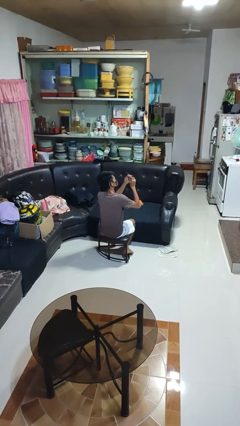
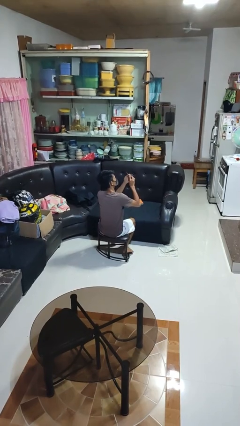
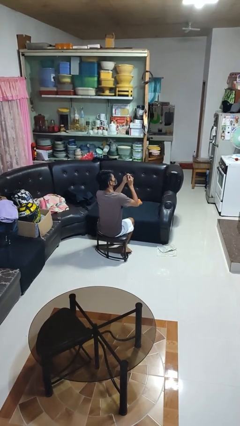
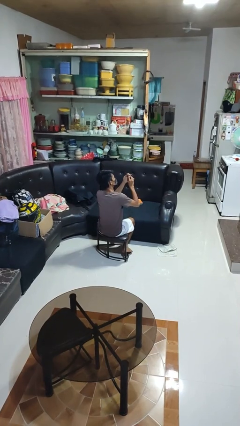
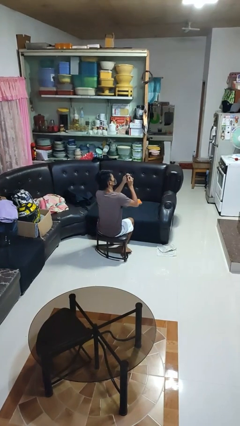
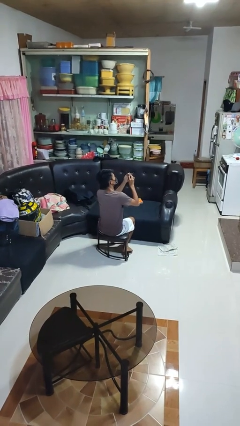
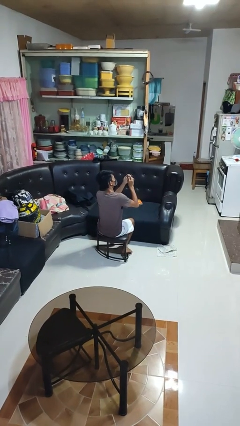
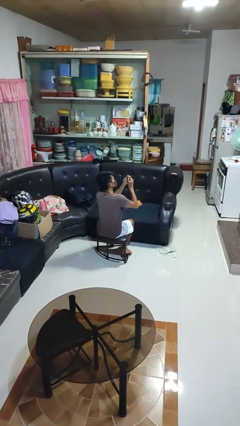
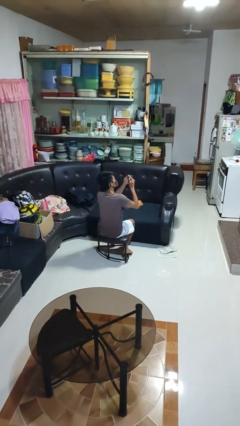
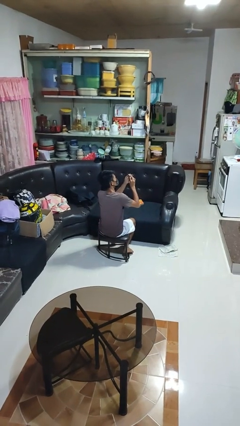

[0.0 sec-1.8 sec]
person files fingernails

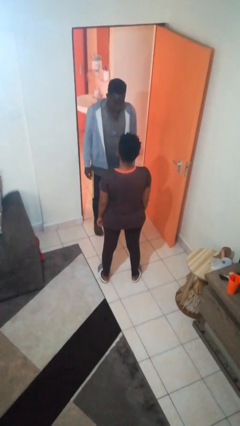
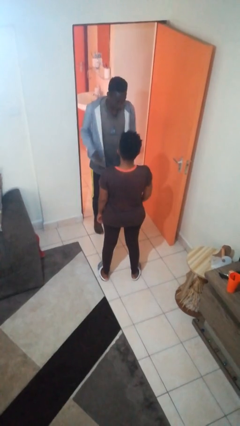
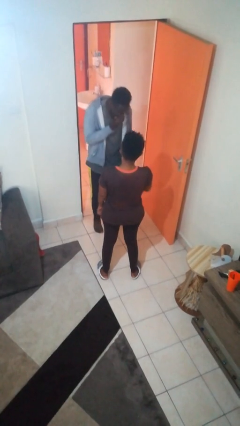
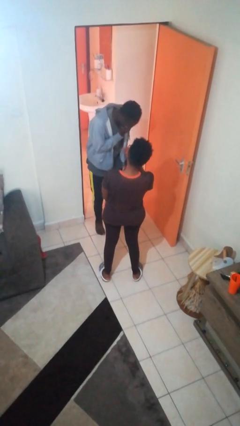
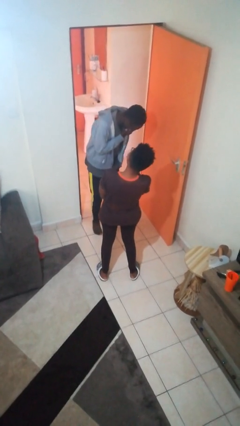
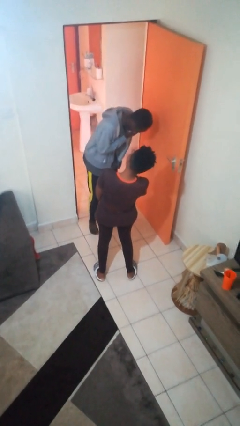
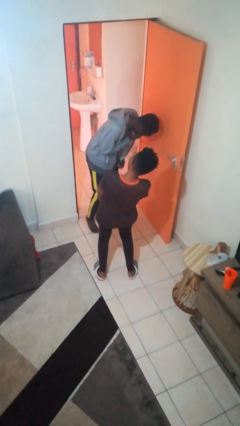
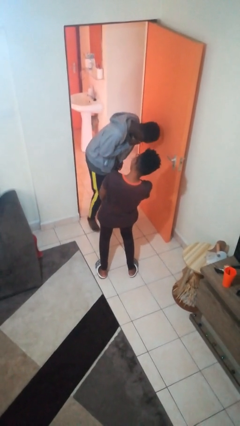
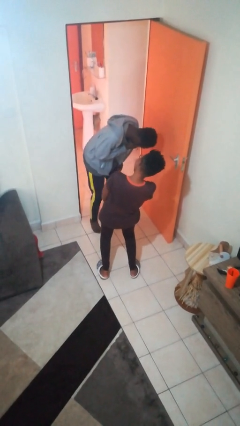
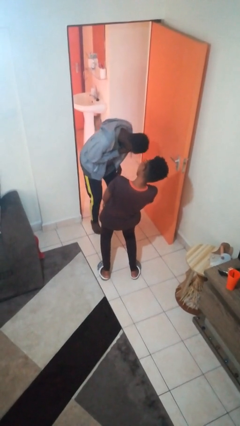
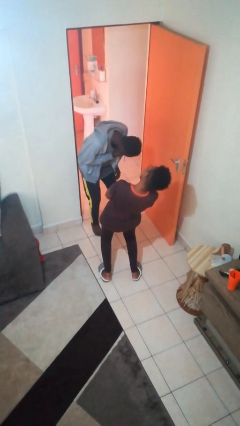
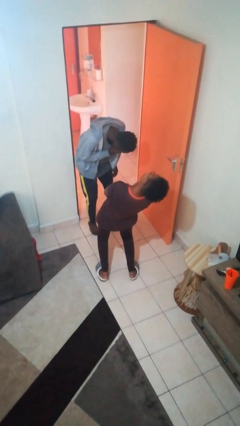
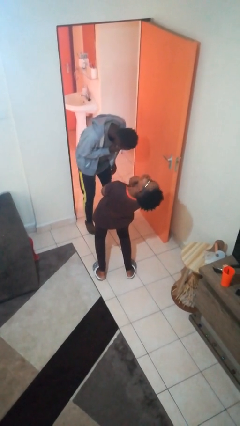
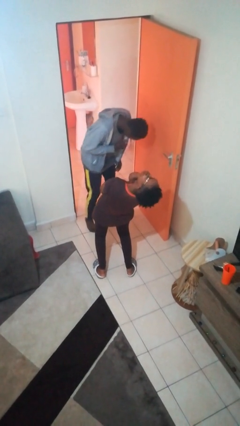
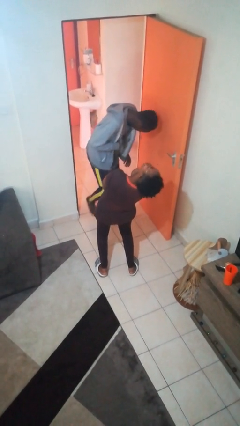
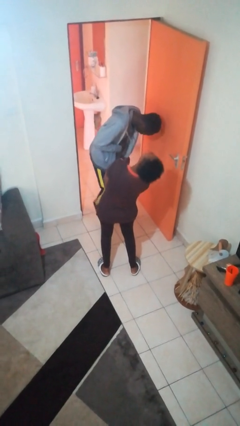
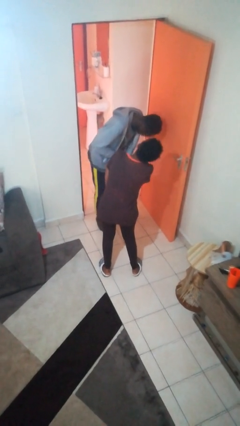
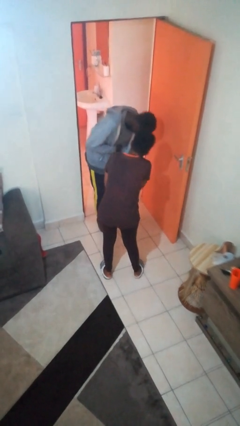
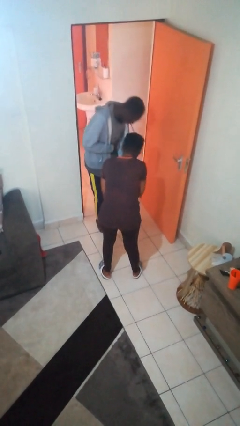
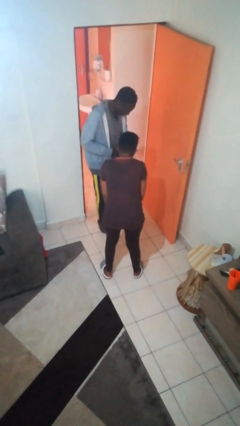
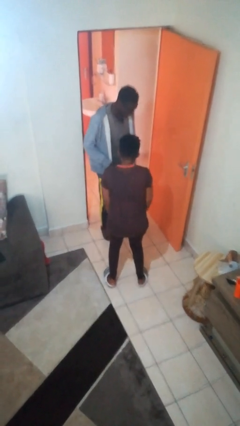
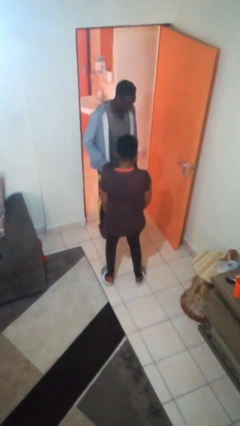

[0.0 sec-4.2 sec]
person laughs with person

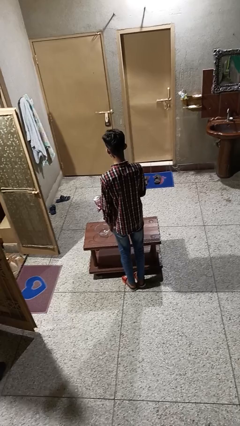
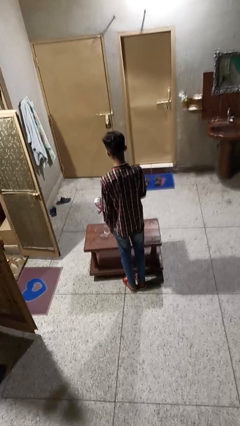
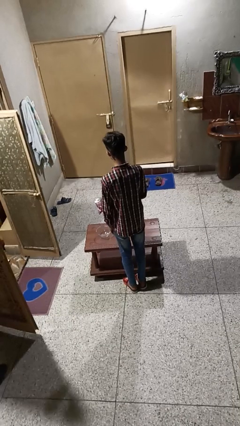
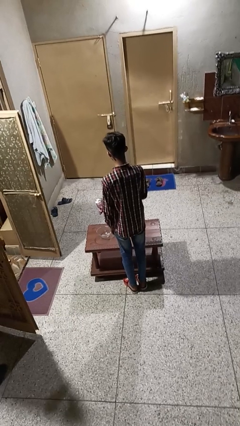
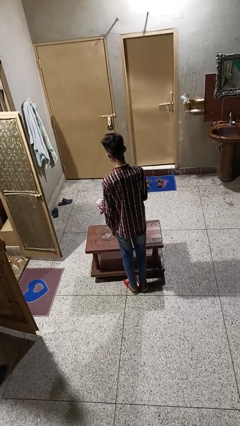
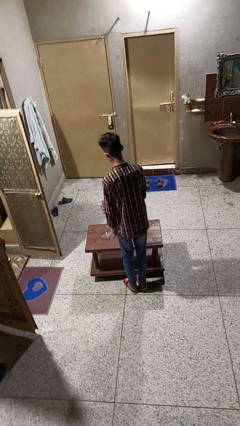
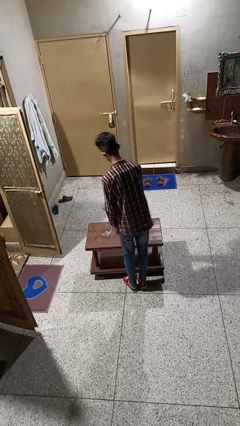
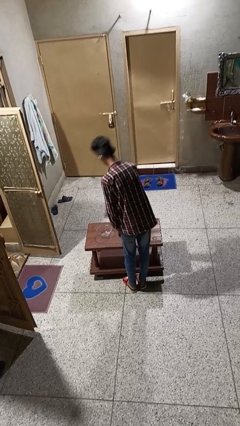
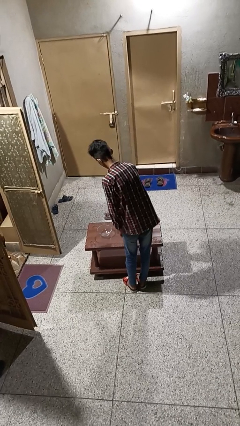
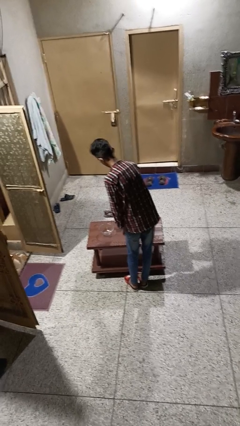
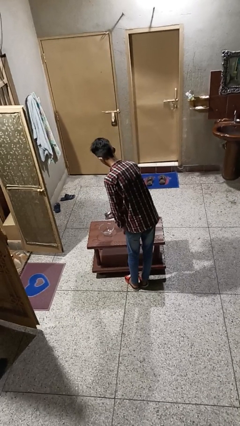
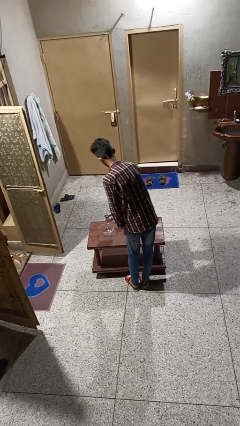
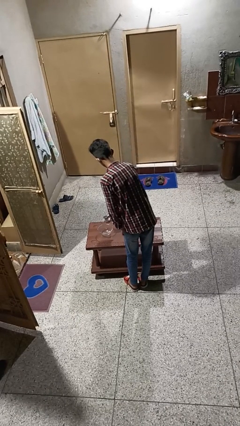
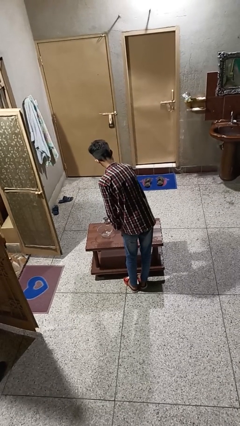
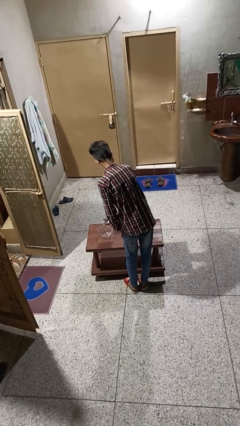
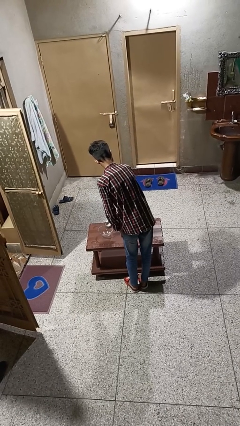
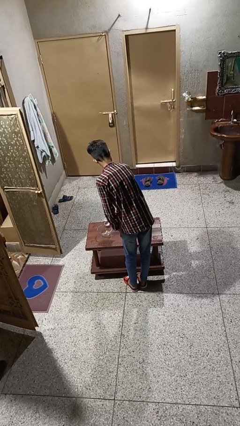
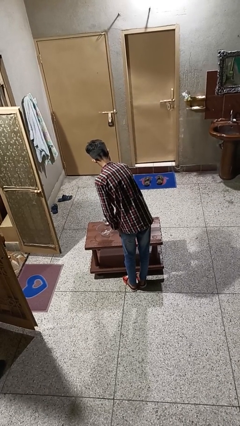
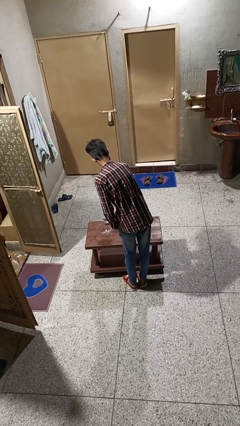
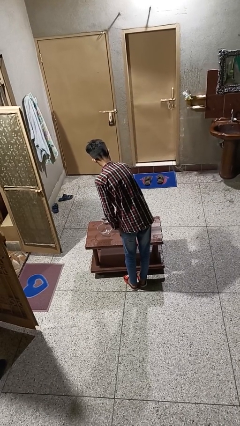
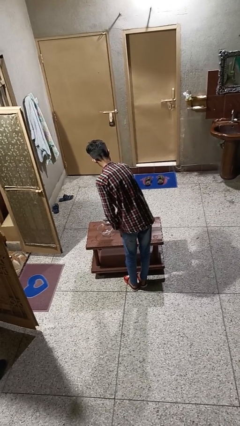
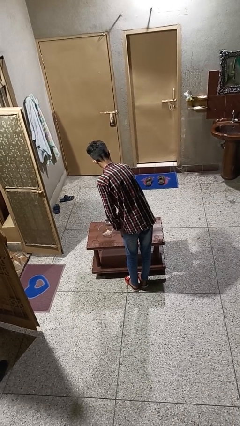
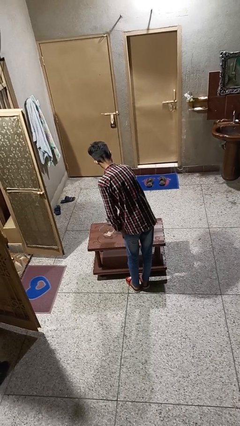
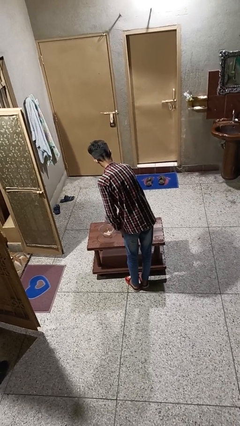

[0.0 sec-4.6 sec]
person pours into bowl

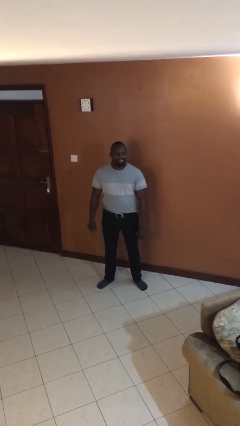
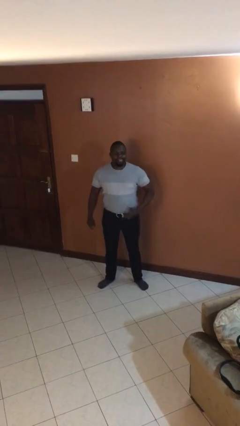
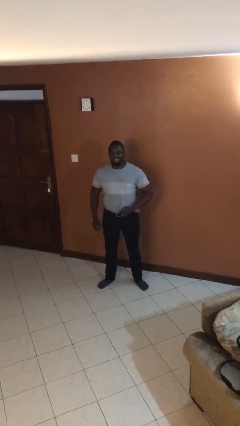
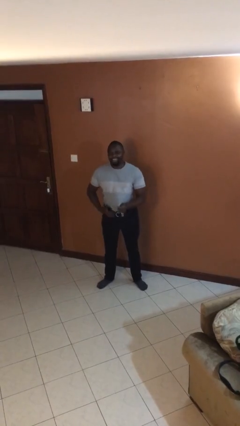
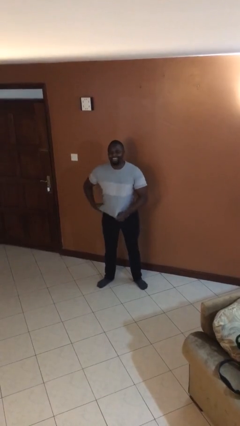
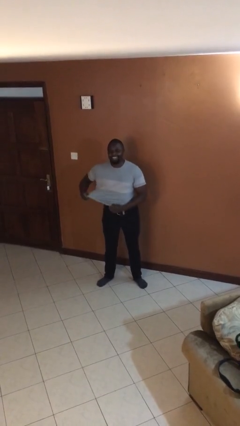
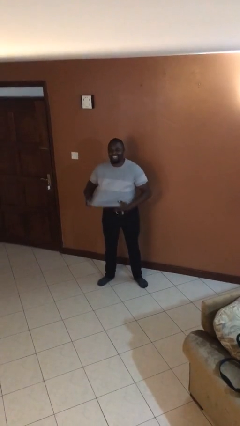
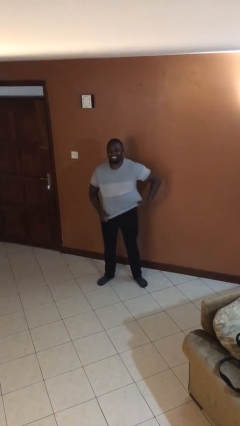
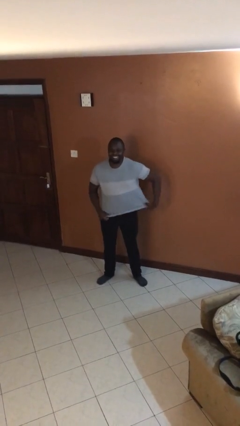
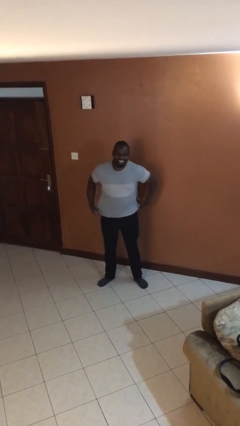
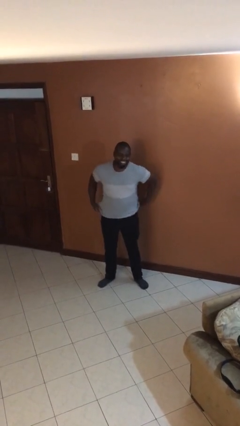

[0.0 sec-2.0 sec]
person untucks shirt

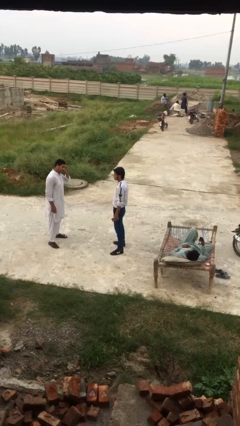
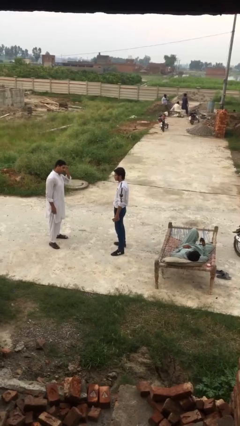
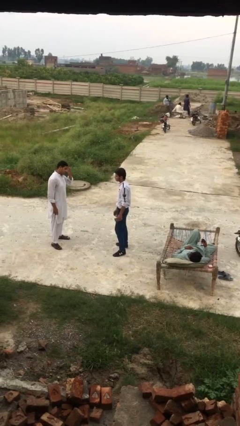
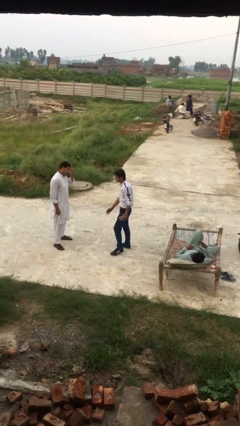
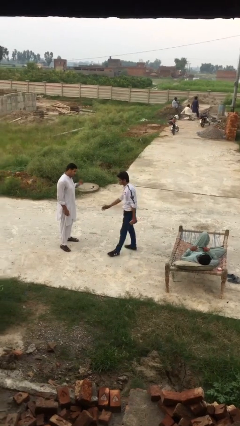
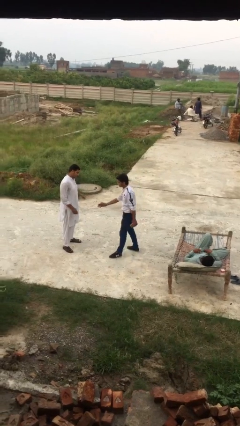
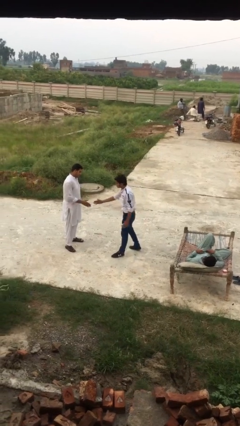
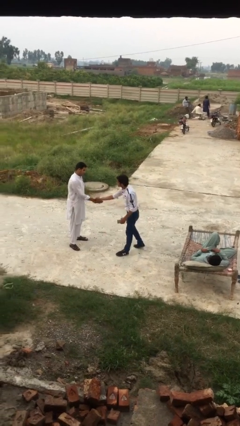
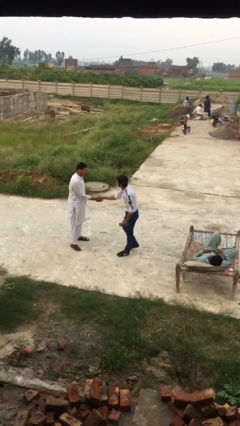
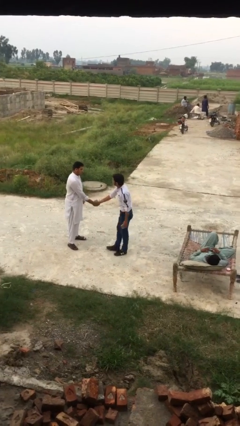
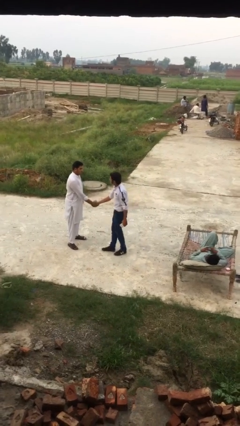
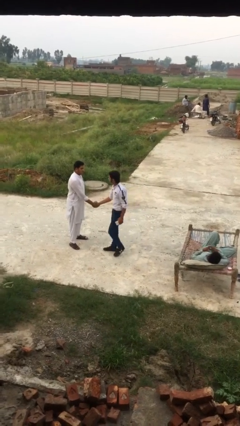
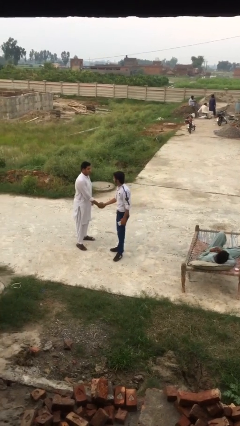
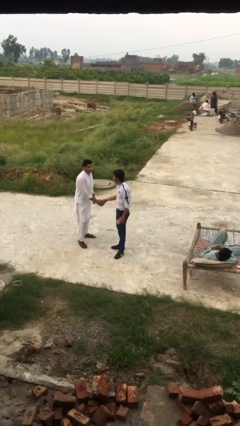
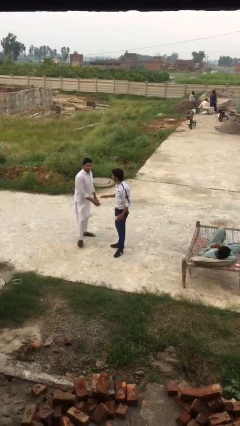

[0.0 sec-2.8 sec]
person shakes hand

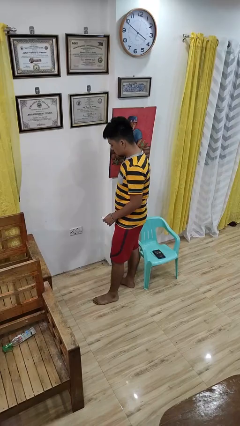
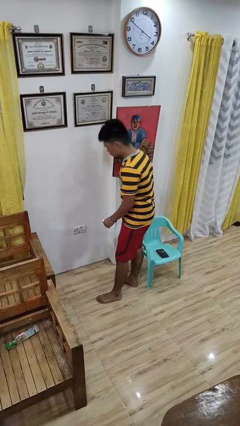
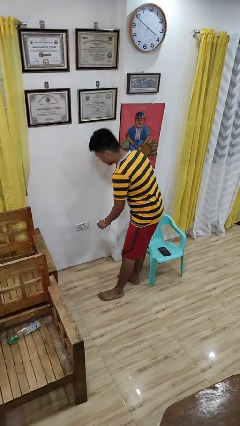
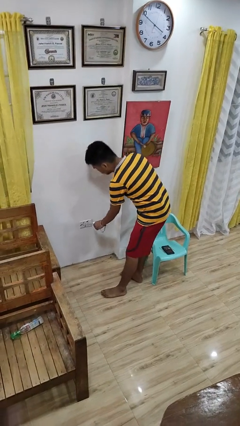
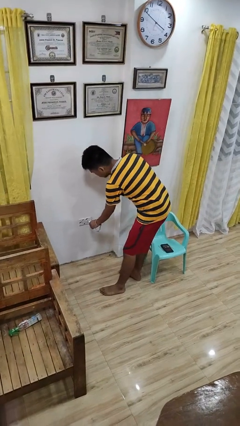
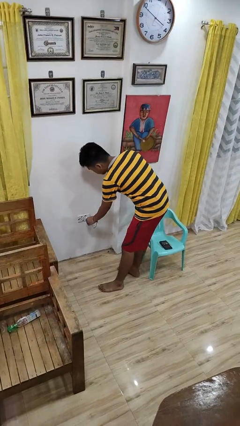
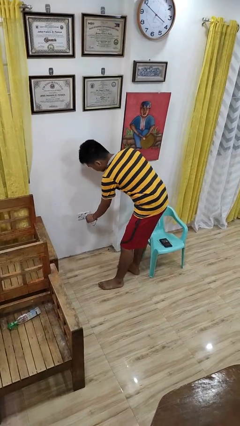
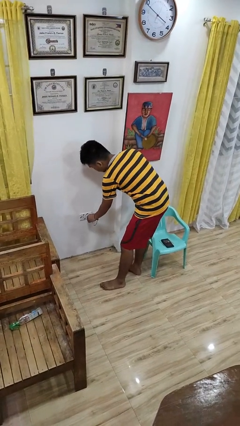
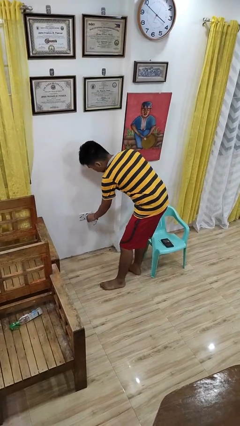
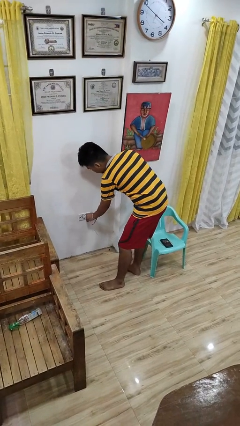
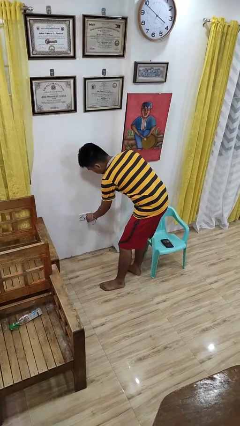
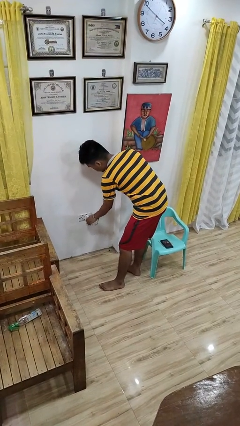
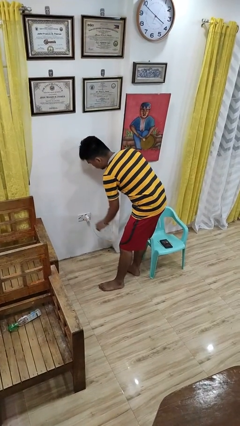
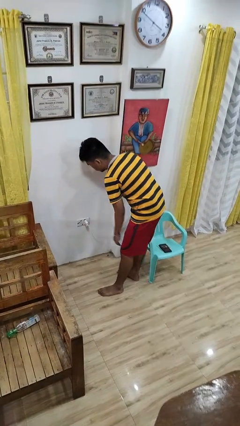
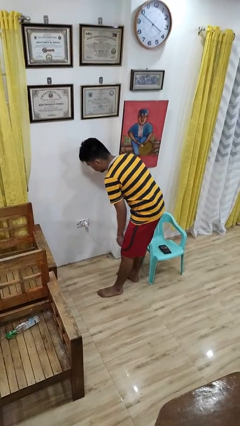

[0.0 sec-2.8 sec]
person plugs into electrical socket
